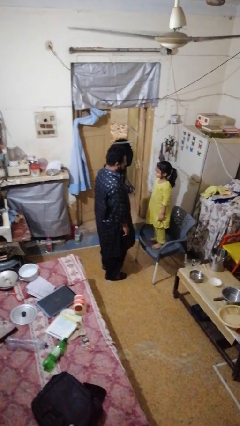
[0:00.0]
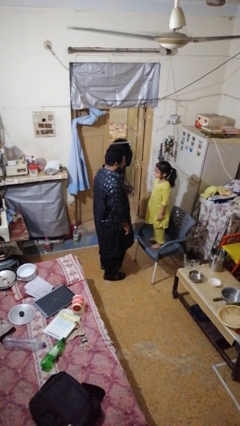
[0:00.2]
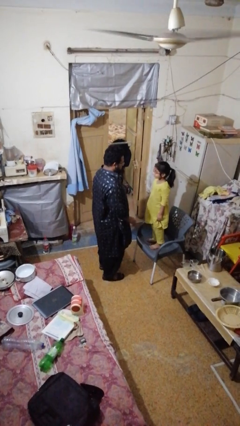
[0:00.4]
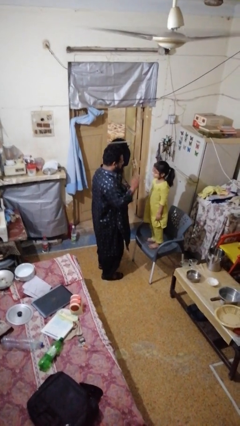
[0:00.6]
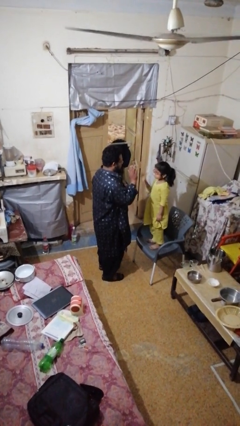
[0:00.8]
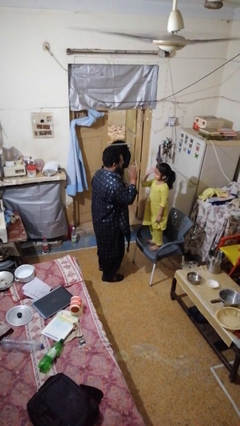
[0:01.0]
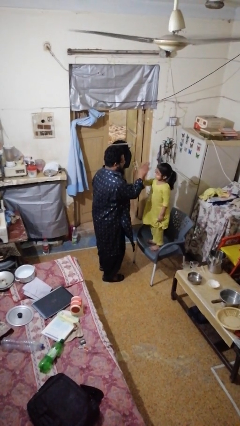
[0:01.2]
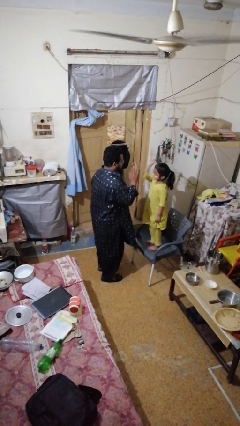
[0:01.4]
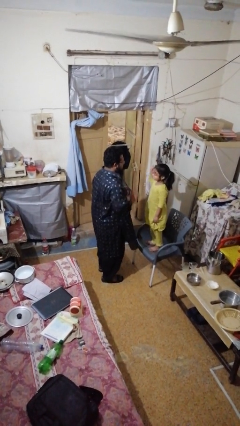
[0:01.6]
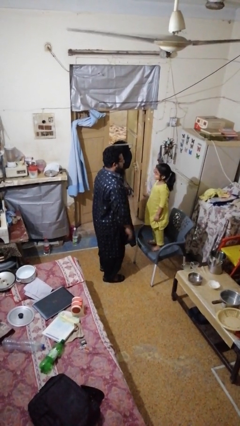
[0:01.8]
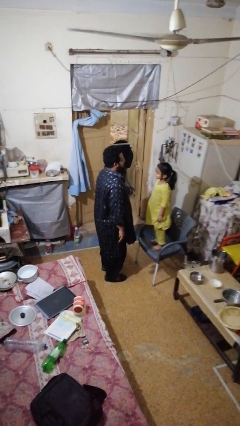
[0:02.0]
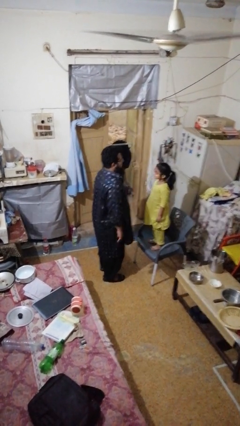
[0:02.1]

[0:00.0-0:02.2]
person highfives hand

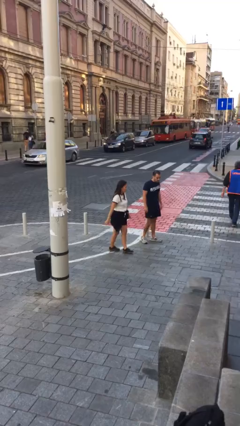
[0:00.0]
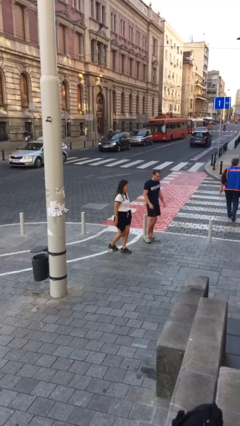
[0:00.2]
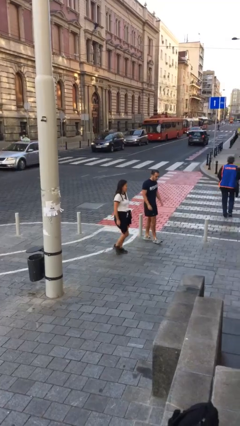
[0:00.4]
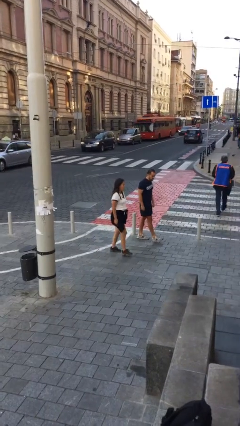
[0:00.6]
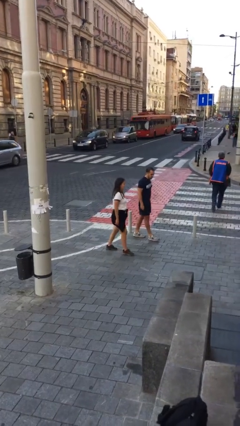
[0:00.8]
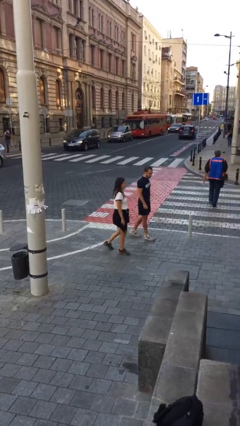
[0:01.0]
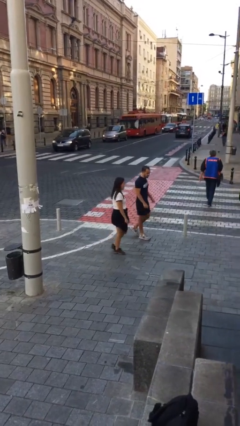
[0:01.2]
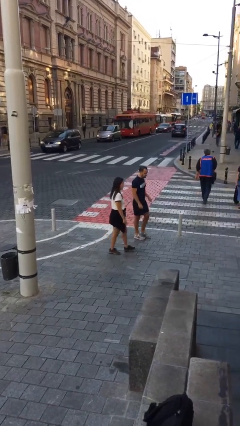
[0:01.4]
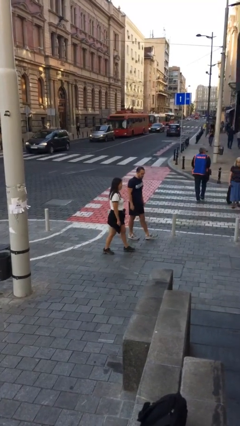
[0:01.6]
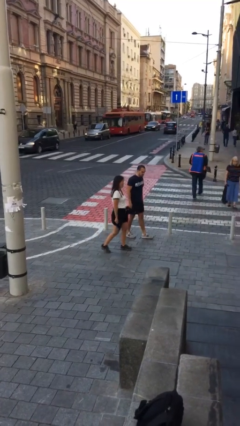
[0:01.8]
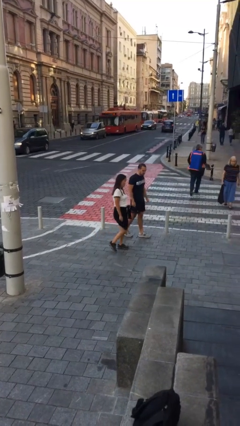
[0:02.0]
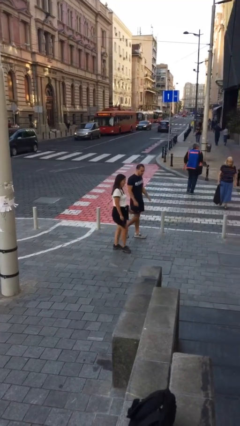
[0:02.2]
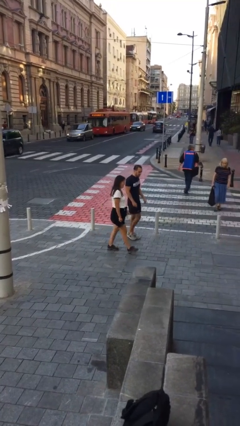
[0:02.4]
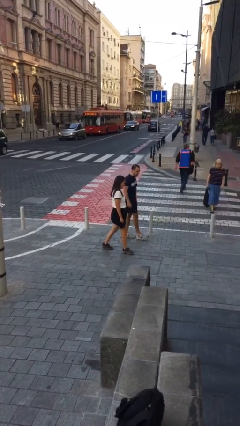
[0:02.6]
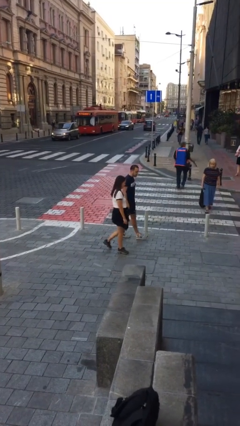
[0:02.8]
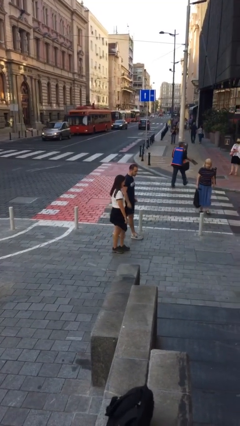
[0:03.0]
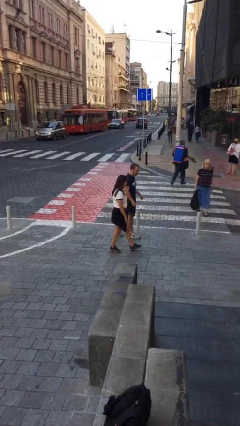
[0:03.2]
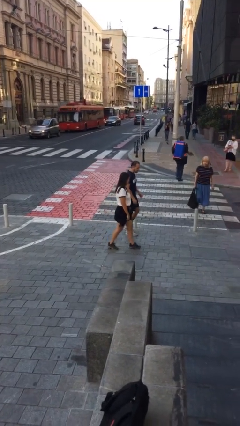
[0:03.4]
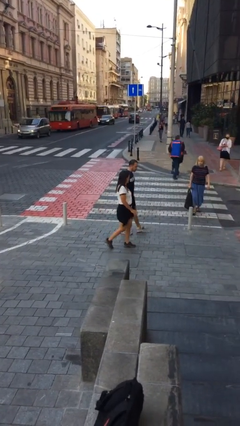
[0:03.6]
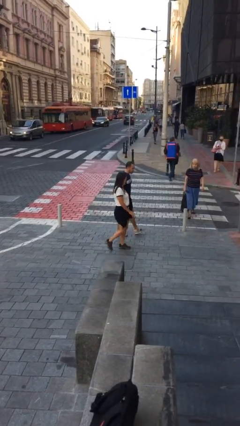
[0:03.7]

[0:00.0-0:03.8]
person talks to person

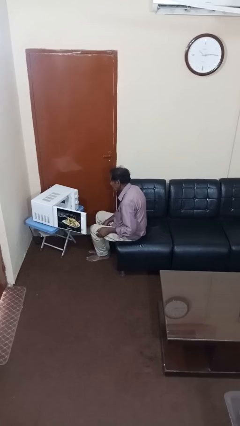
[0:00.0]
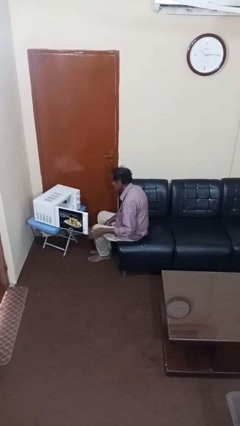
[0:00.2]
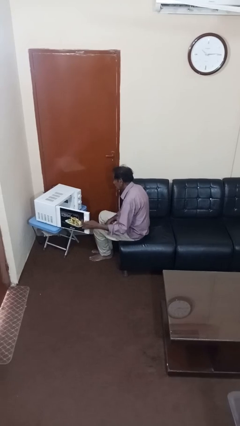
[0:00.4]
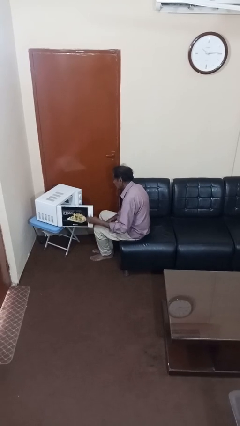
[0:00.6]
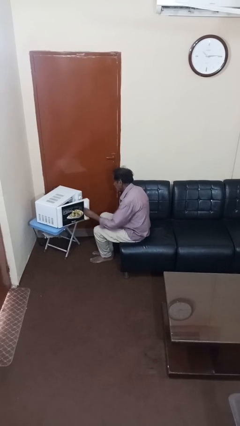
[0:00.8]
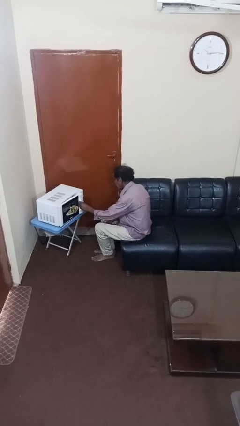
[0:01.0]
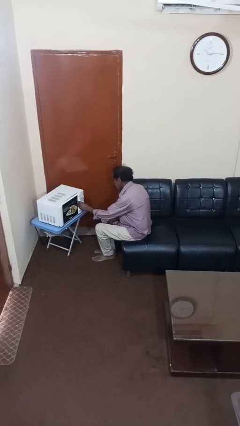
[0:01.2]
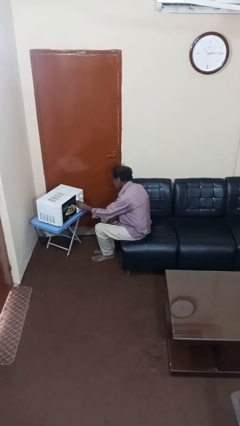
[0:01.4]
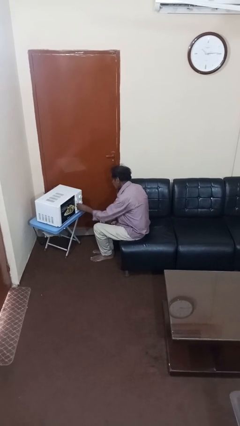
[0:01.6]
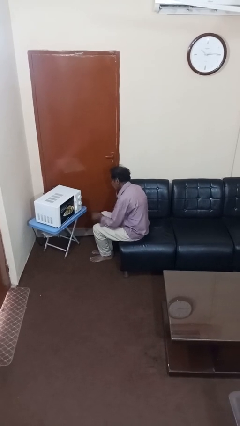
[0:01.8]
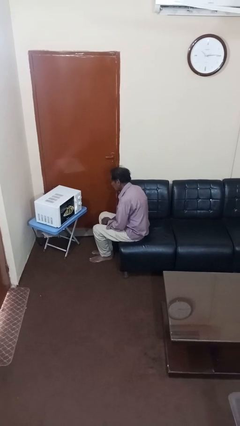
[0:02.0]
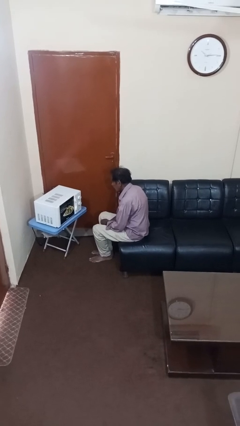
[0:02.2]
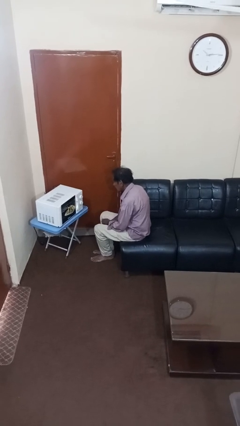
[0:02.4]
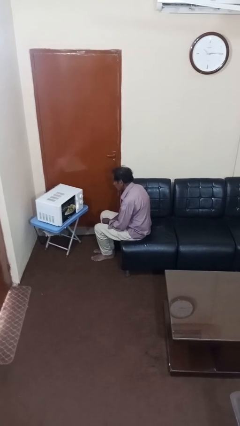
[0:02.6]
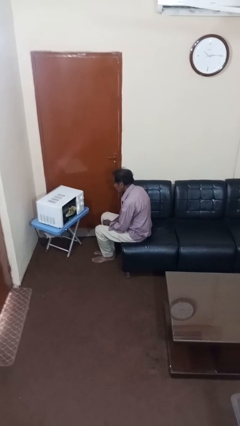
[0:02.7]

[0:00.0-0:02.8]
person closes microwave

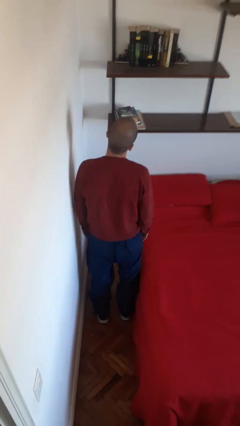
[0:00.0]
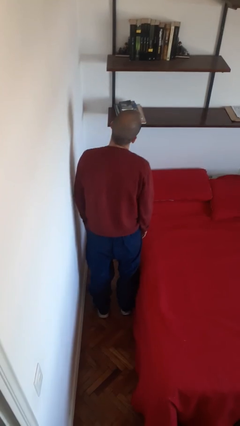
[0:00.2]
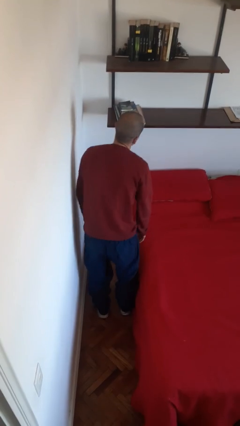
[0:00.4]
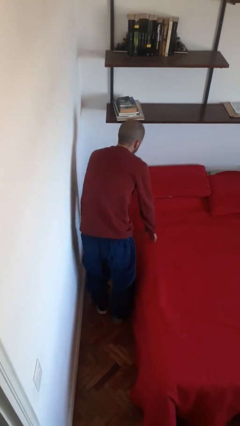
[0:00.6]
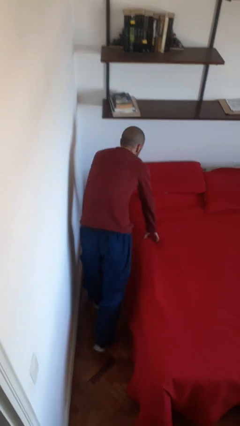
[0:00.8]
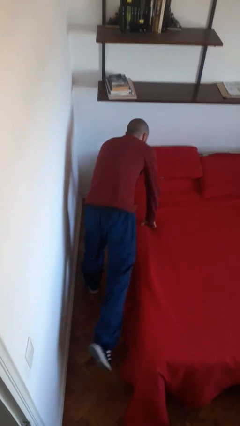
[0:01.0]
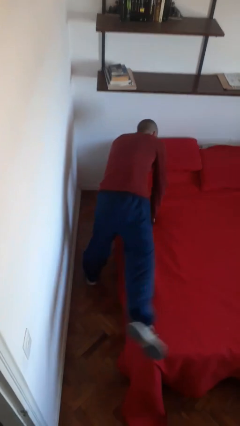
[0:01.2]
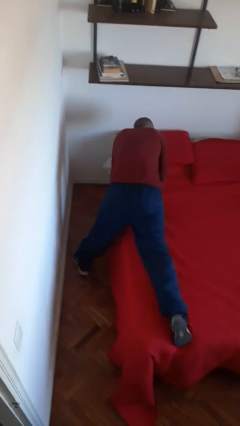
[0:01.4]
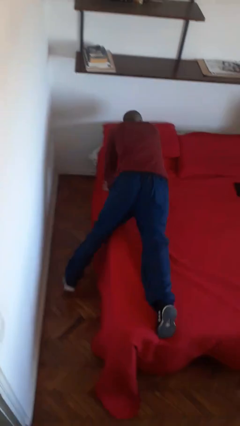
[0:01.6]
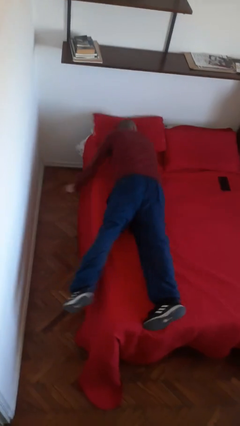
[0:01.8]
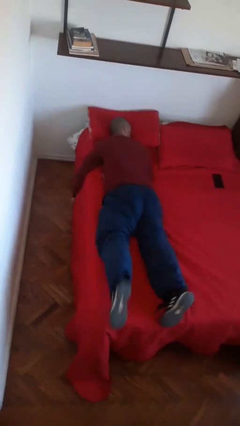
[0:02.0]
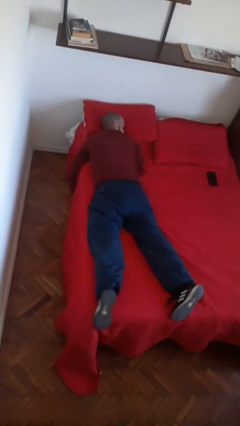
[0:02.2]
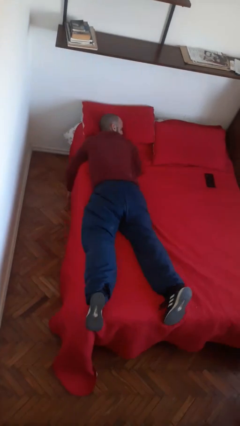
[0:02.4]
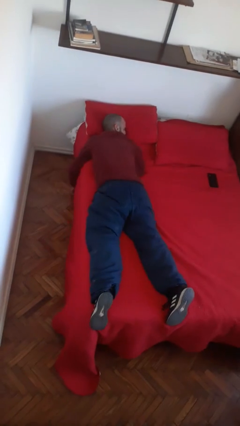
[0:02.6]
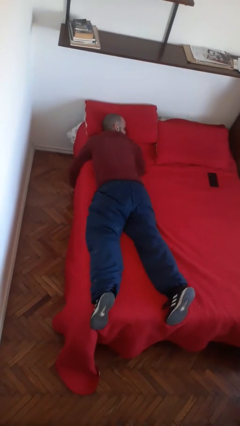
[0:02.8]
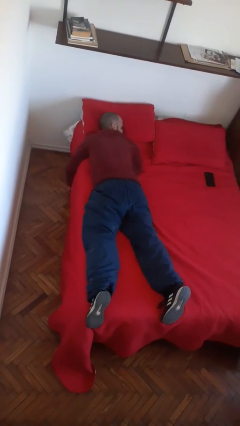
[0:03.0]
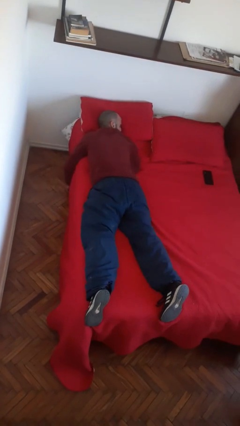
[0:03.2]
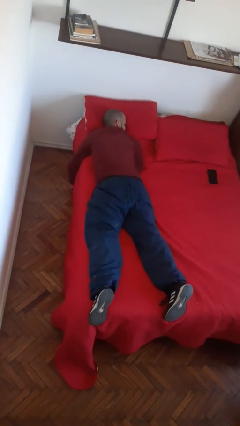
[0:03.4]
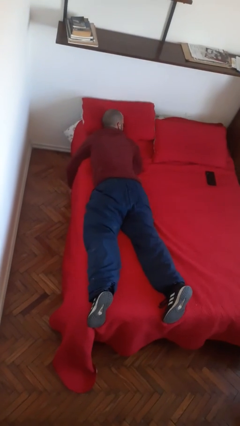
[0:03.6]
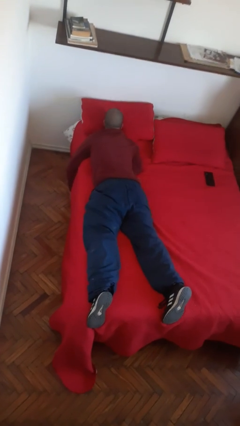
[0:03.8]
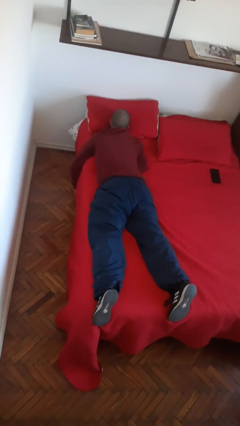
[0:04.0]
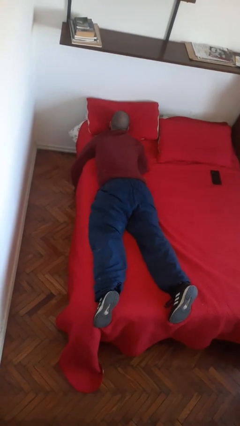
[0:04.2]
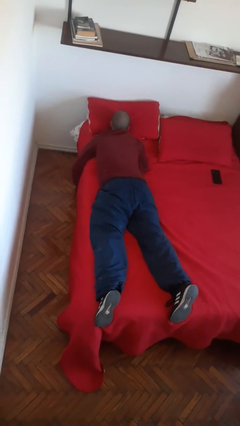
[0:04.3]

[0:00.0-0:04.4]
person lies down on bed

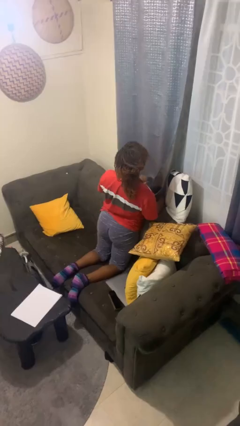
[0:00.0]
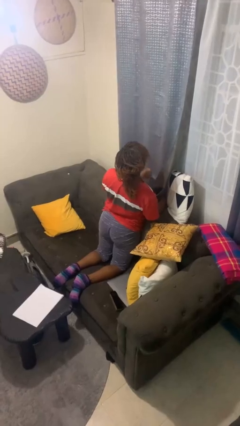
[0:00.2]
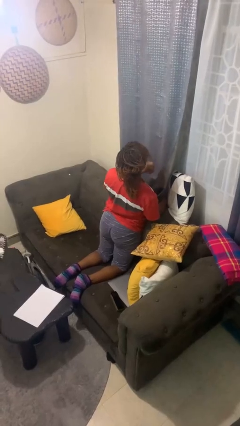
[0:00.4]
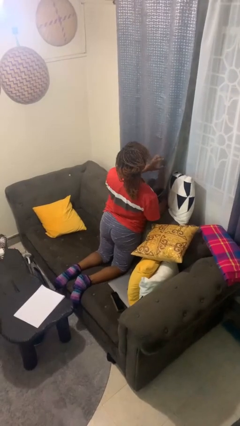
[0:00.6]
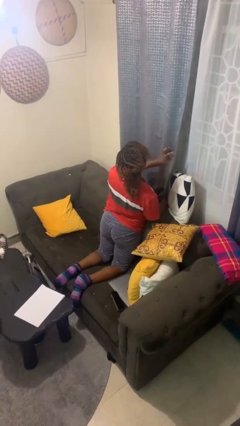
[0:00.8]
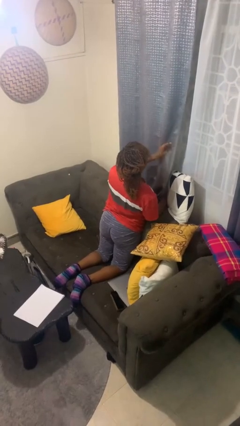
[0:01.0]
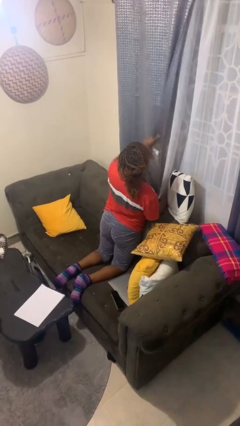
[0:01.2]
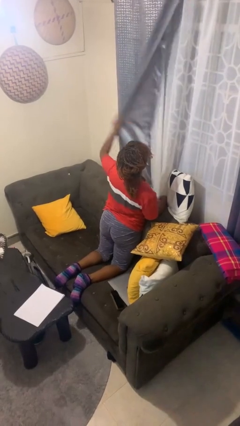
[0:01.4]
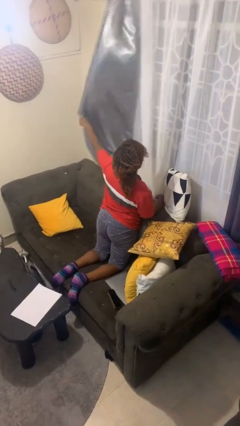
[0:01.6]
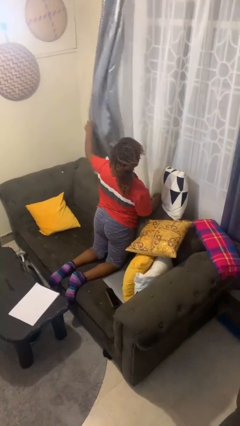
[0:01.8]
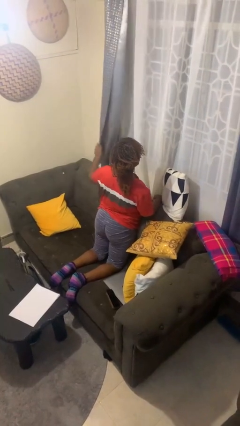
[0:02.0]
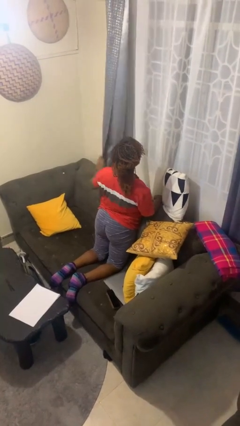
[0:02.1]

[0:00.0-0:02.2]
person opens curtains

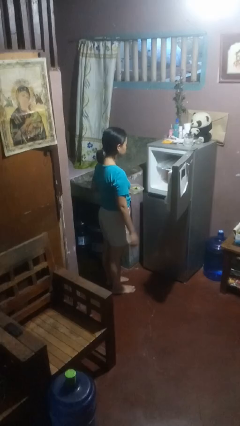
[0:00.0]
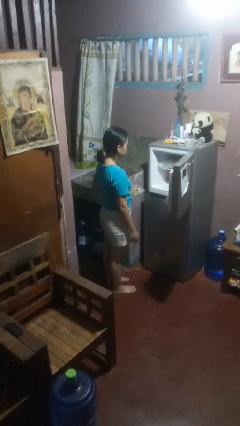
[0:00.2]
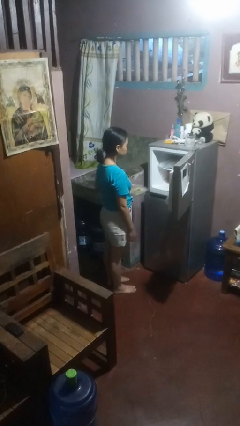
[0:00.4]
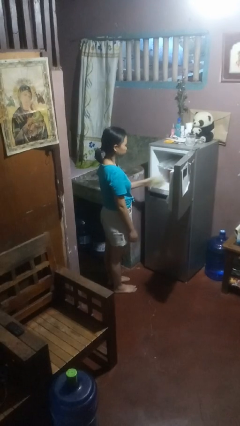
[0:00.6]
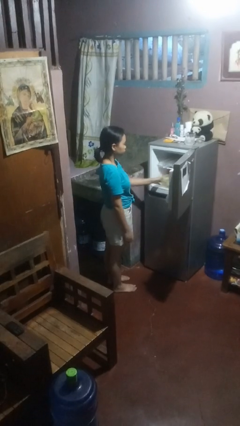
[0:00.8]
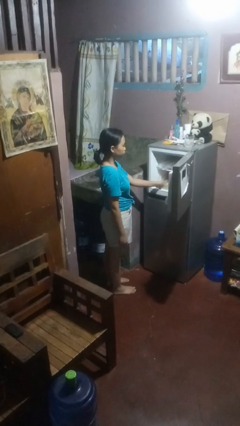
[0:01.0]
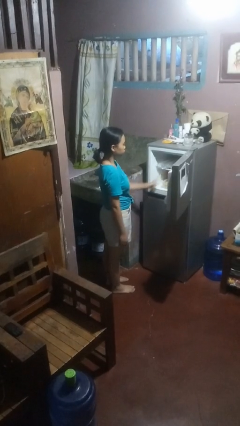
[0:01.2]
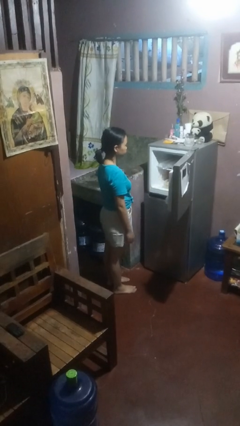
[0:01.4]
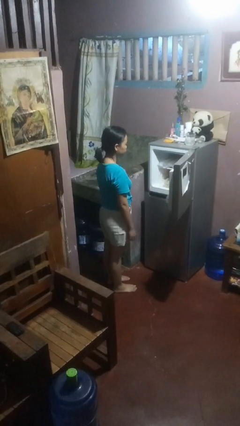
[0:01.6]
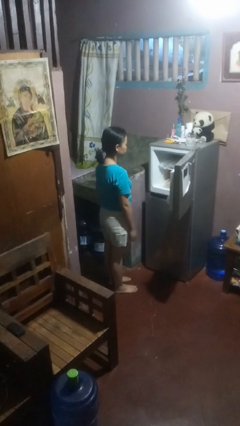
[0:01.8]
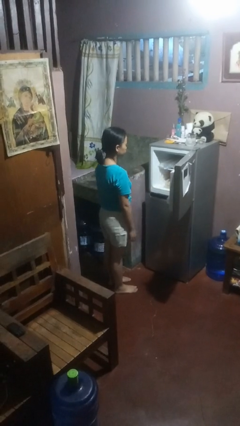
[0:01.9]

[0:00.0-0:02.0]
person puts object into refrigerator

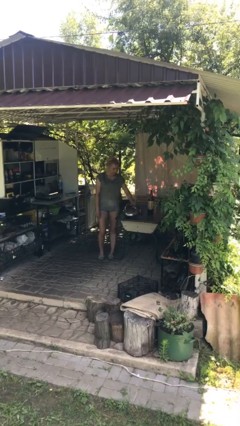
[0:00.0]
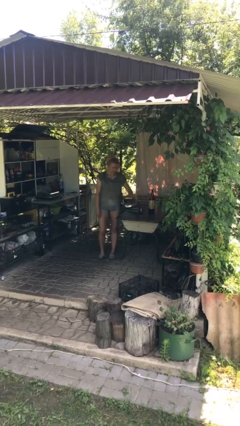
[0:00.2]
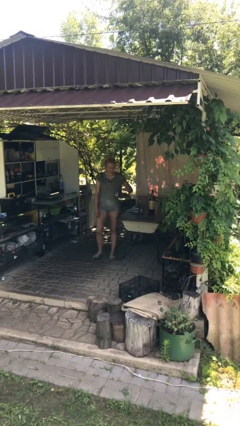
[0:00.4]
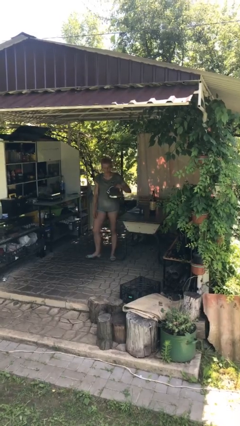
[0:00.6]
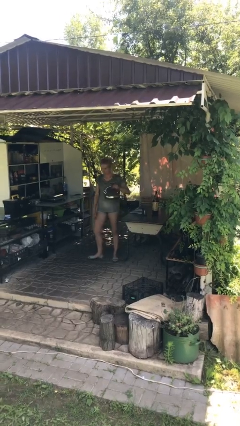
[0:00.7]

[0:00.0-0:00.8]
person picks up object from table
